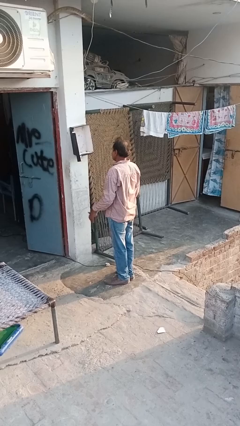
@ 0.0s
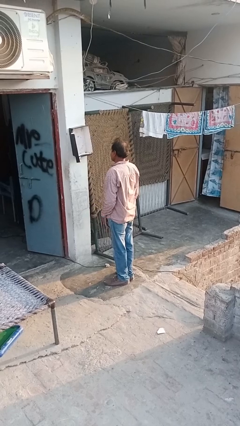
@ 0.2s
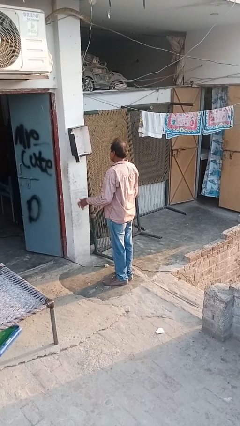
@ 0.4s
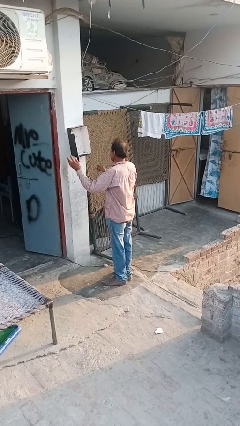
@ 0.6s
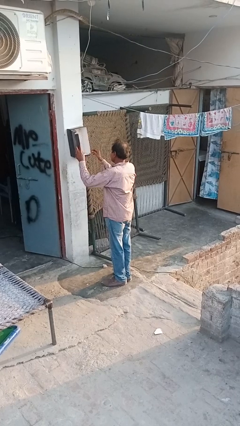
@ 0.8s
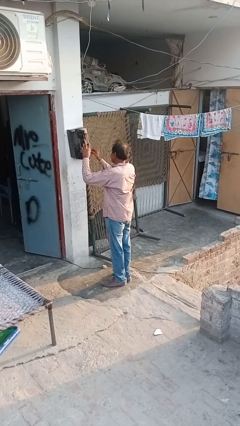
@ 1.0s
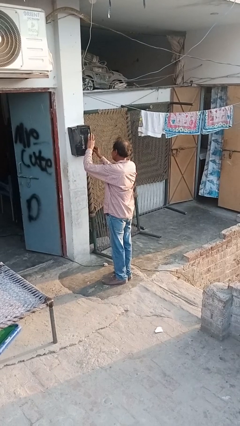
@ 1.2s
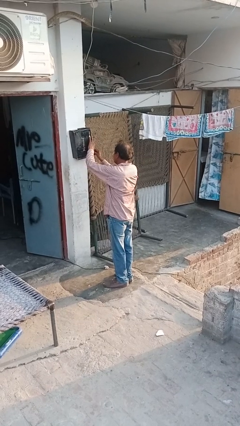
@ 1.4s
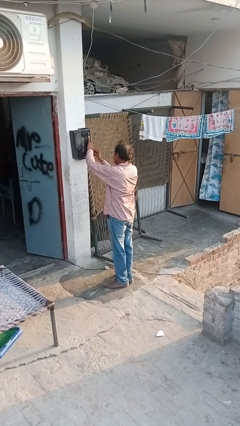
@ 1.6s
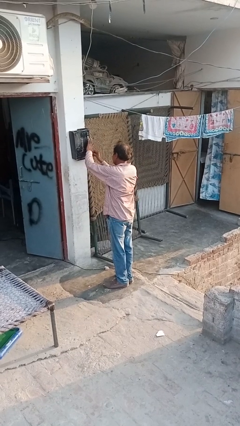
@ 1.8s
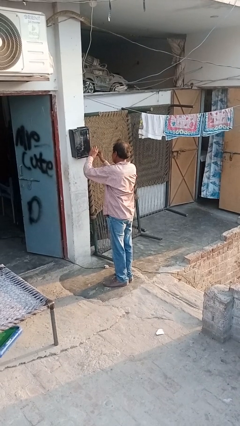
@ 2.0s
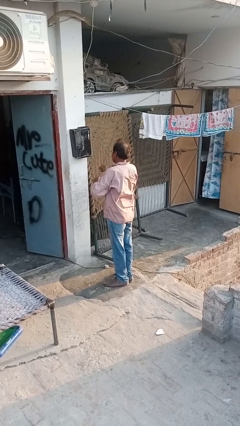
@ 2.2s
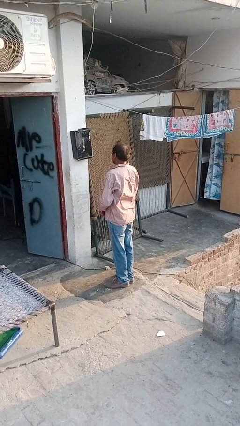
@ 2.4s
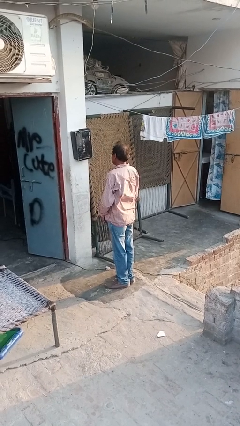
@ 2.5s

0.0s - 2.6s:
person closes mailbox

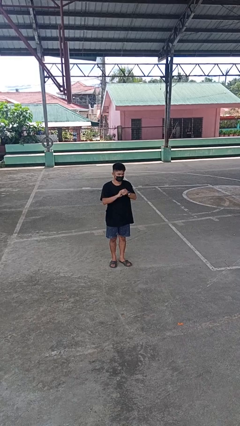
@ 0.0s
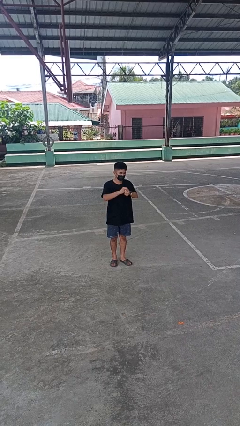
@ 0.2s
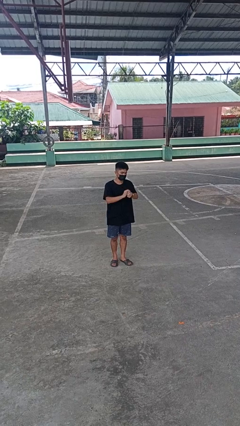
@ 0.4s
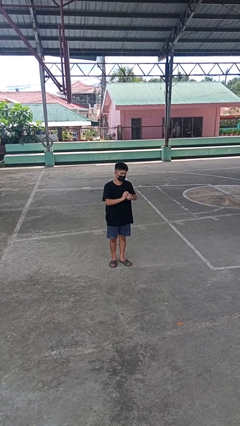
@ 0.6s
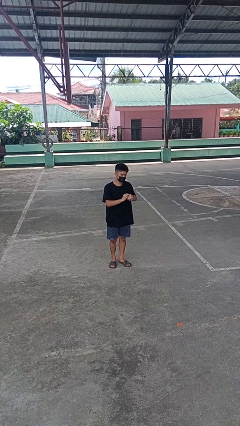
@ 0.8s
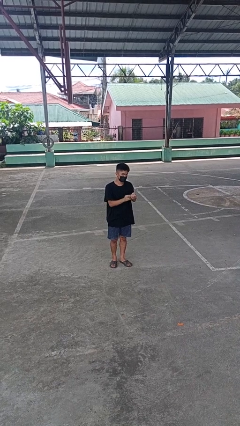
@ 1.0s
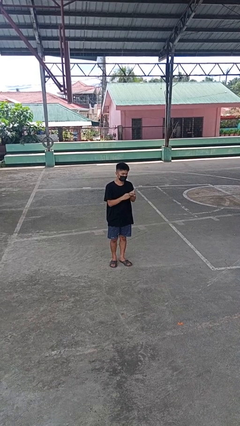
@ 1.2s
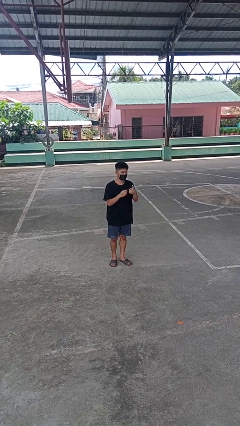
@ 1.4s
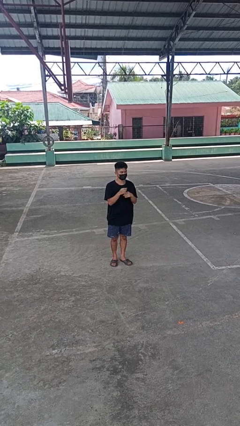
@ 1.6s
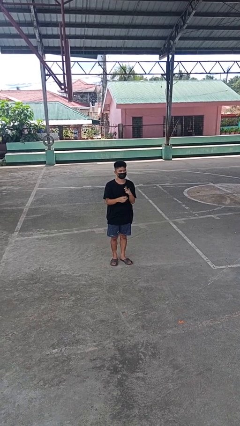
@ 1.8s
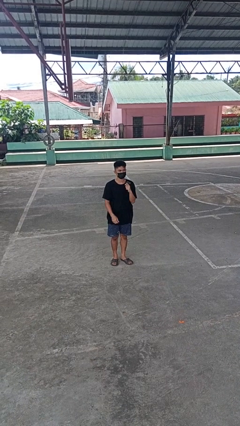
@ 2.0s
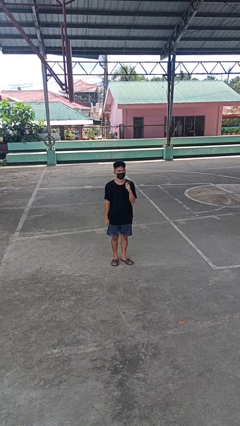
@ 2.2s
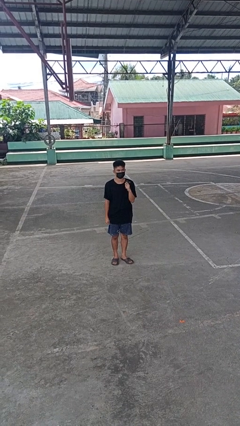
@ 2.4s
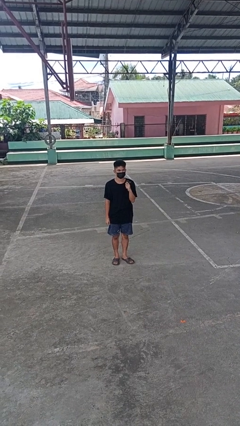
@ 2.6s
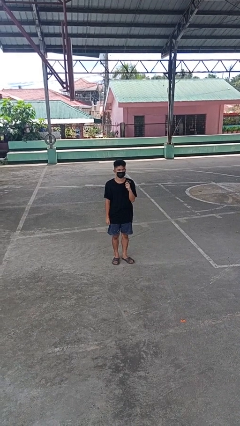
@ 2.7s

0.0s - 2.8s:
person takes off wristwatch

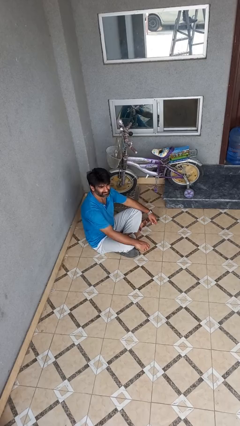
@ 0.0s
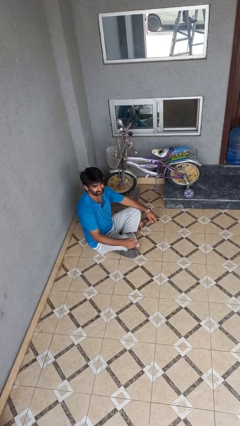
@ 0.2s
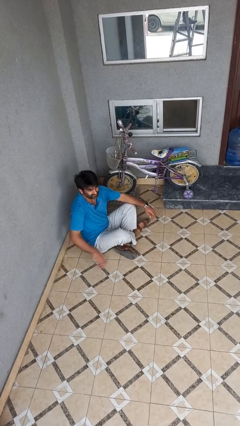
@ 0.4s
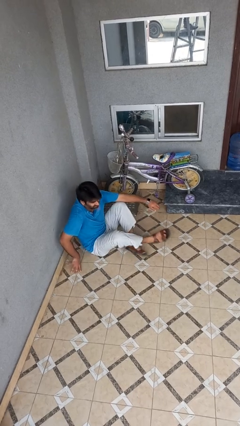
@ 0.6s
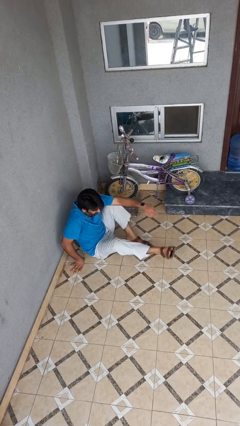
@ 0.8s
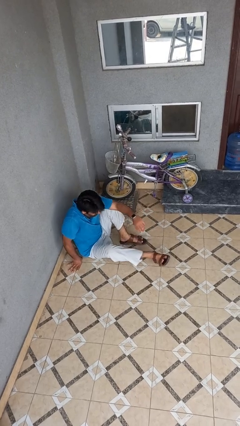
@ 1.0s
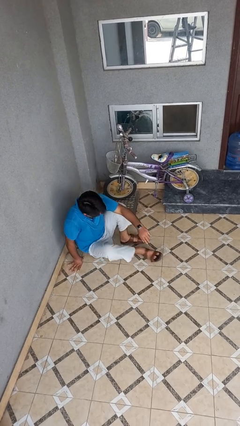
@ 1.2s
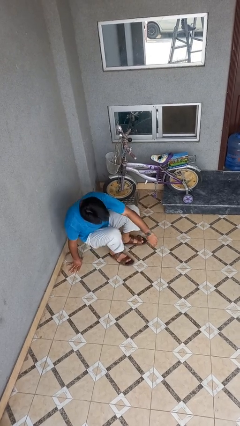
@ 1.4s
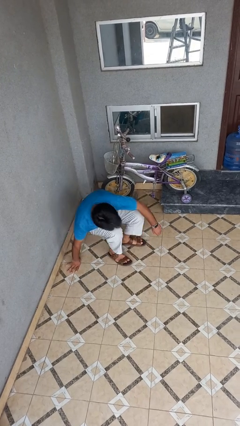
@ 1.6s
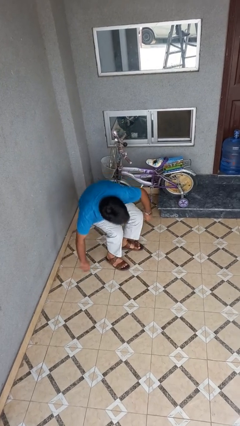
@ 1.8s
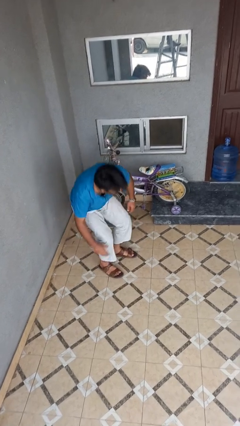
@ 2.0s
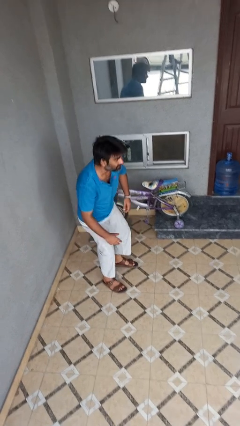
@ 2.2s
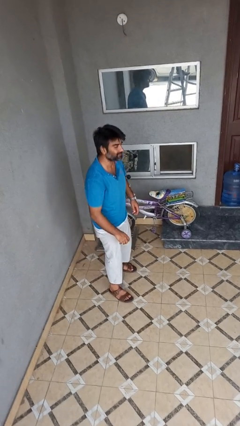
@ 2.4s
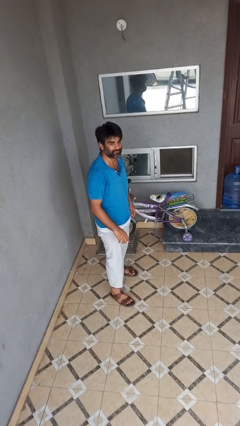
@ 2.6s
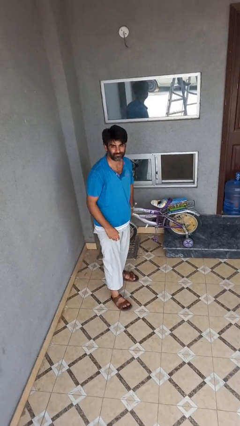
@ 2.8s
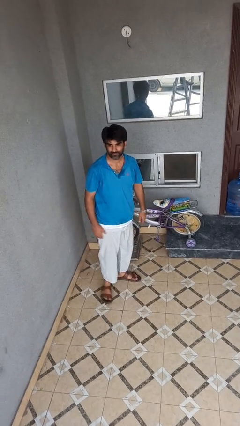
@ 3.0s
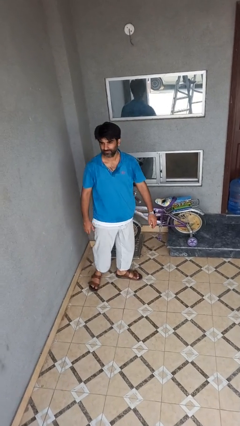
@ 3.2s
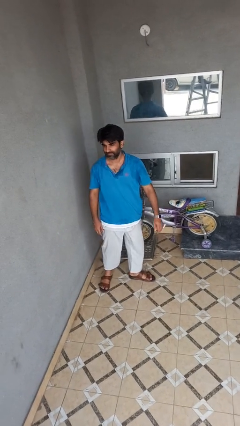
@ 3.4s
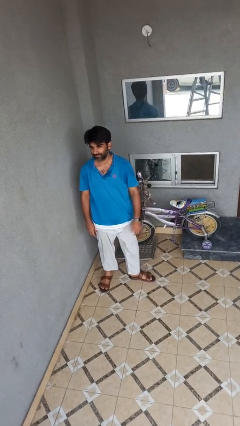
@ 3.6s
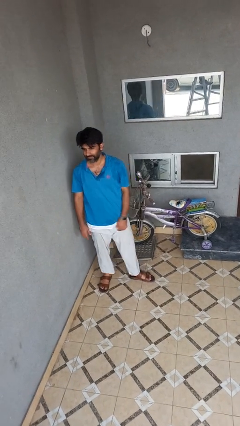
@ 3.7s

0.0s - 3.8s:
person stands up from floor

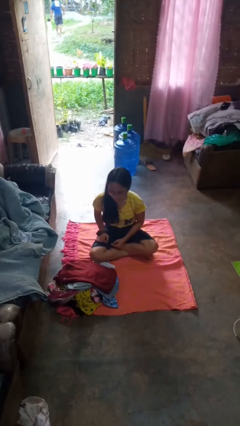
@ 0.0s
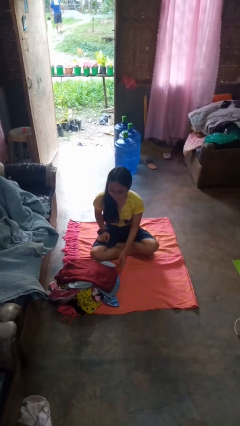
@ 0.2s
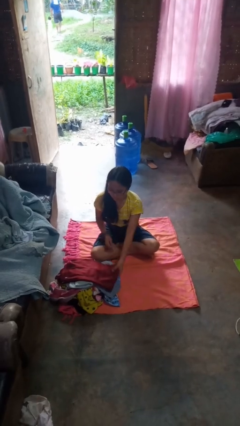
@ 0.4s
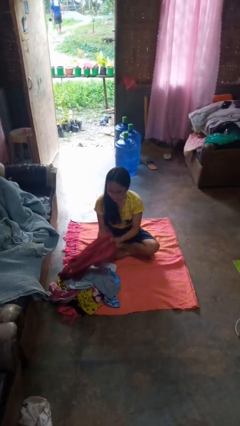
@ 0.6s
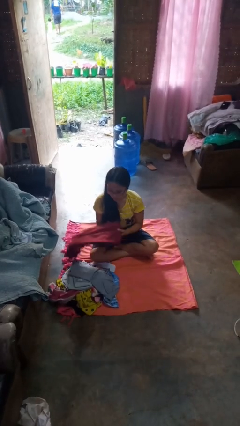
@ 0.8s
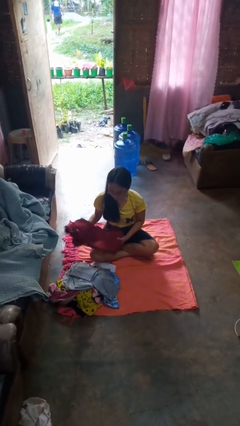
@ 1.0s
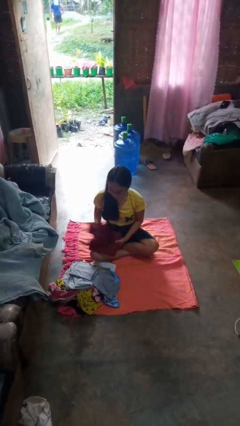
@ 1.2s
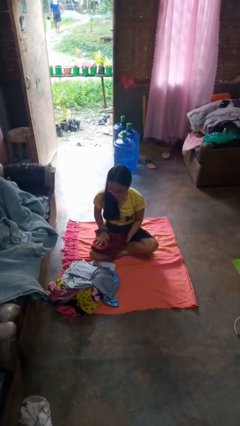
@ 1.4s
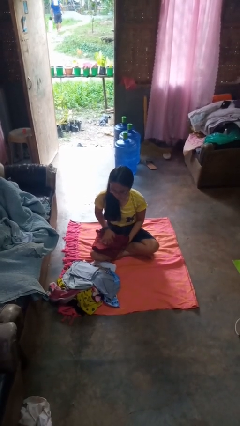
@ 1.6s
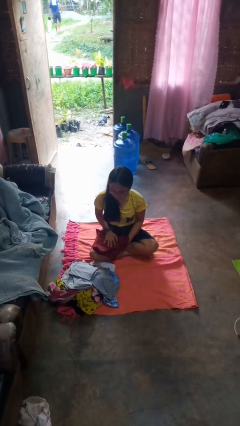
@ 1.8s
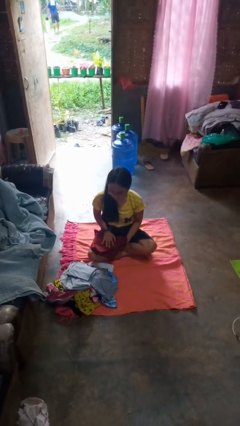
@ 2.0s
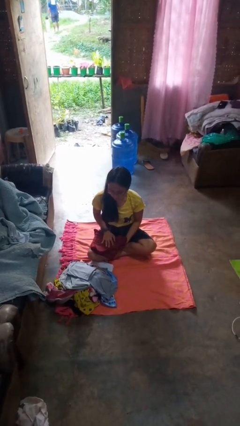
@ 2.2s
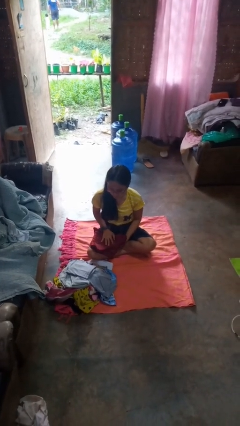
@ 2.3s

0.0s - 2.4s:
person folds pants

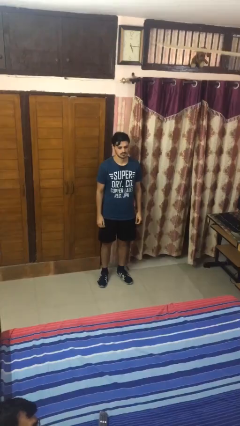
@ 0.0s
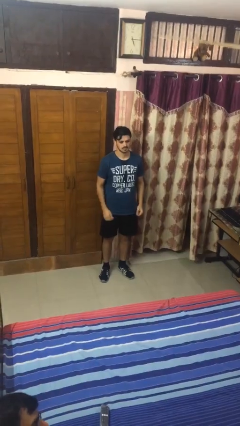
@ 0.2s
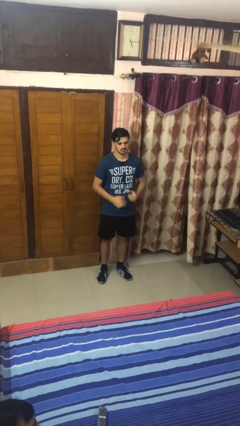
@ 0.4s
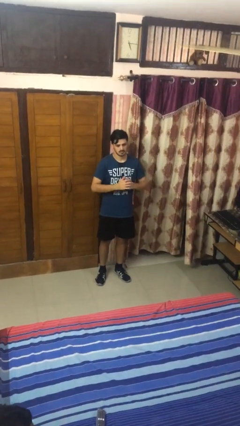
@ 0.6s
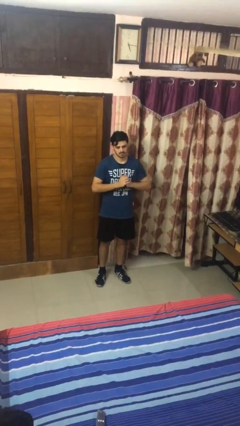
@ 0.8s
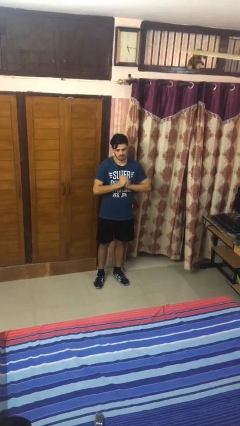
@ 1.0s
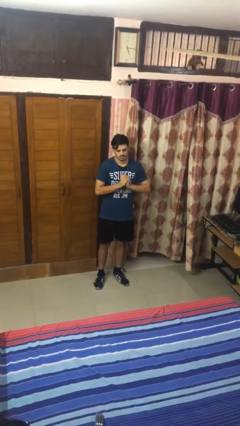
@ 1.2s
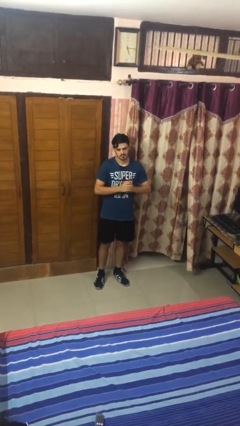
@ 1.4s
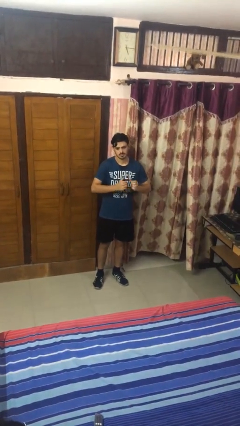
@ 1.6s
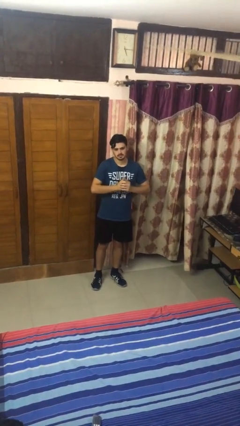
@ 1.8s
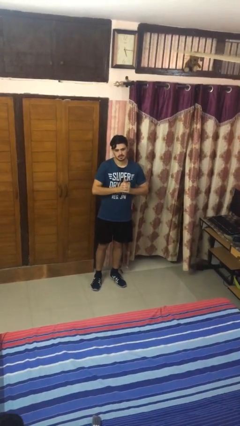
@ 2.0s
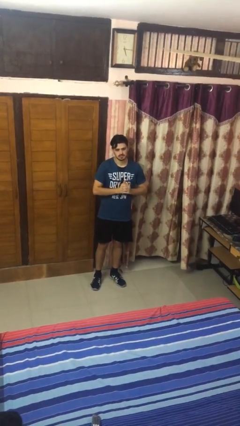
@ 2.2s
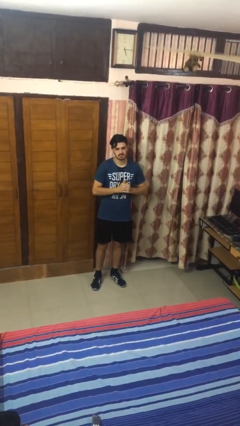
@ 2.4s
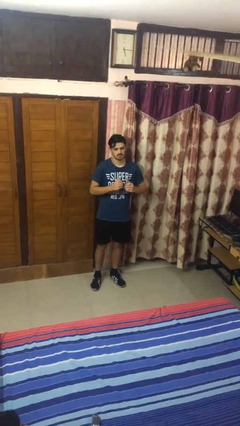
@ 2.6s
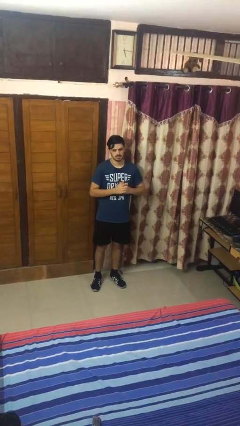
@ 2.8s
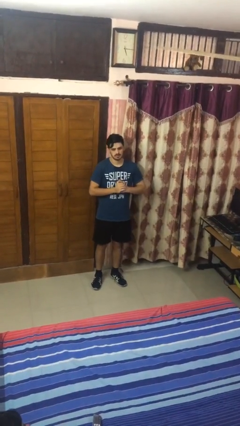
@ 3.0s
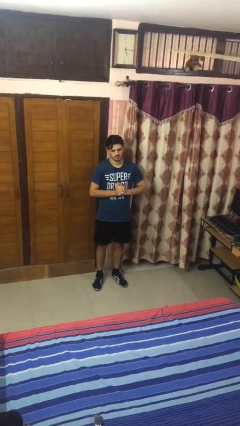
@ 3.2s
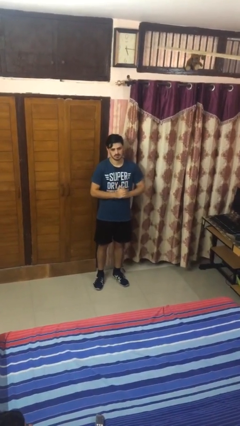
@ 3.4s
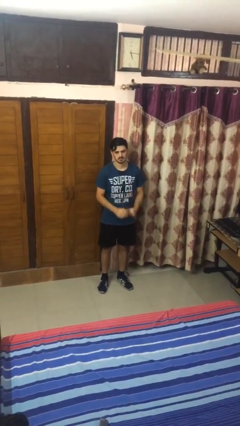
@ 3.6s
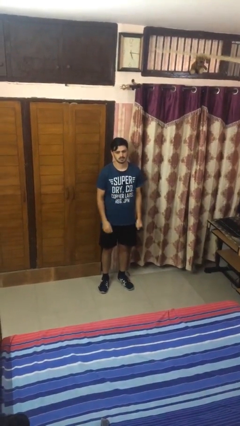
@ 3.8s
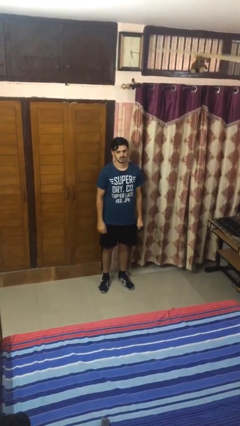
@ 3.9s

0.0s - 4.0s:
person cracks knuckles

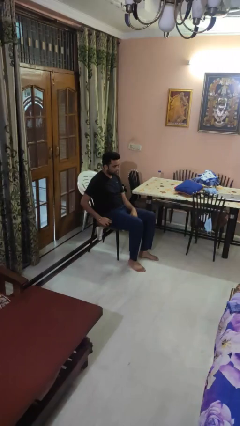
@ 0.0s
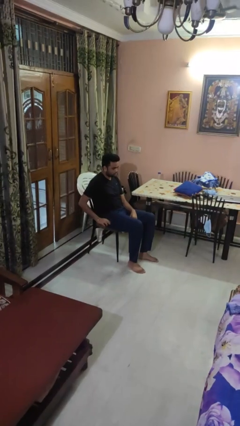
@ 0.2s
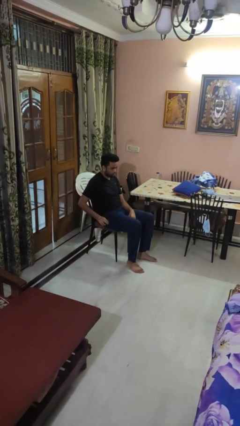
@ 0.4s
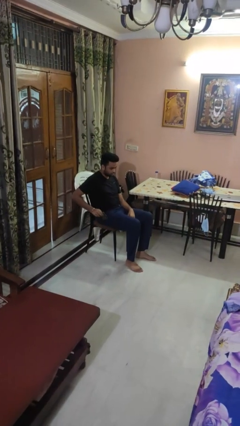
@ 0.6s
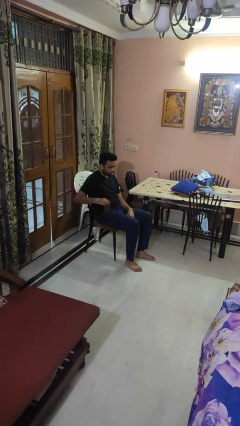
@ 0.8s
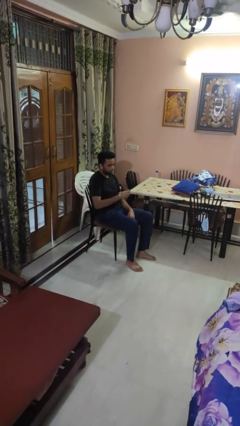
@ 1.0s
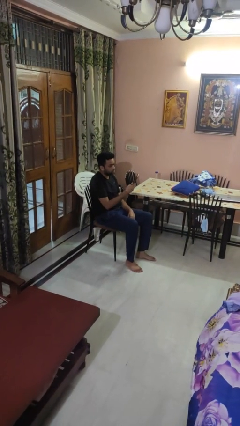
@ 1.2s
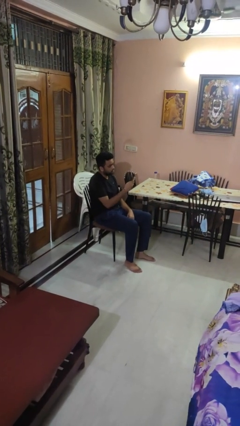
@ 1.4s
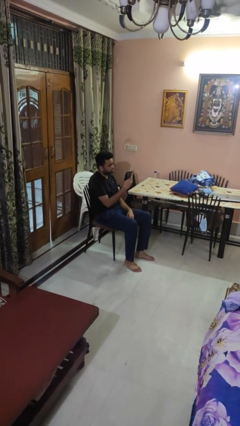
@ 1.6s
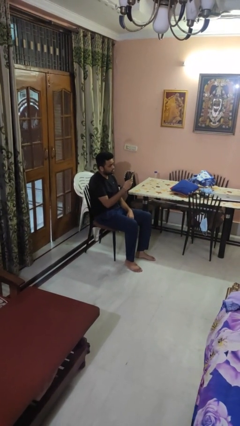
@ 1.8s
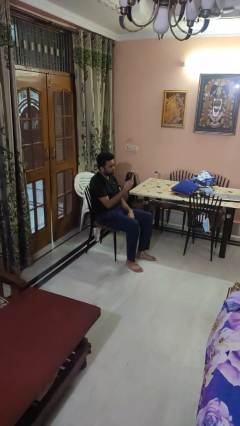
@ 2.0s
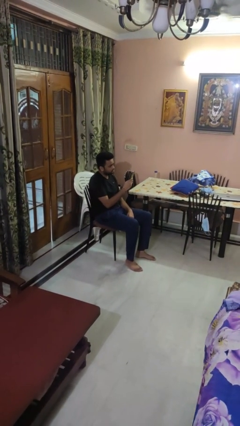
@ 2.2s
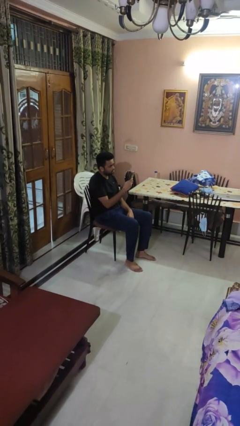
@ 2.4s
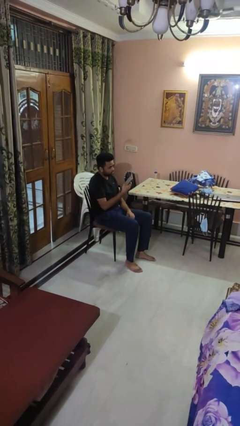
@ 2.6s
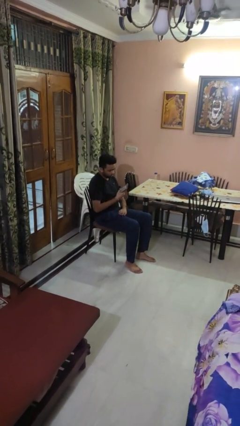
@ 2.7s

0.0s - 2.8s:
person takes phone from pocket
